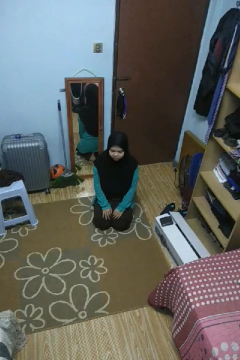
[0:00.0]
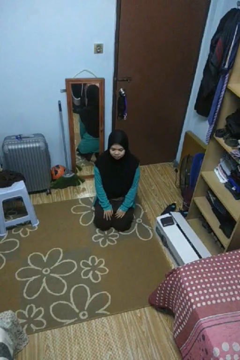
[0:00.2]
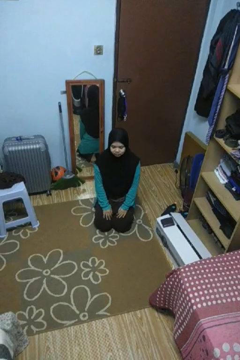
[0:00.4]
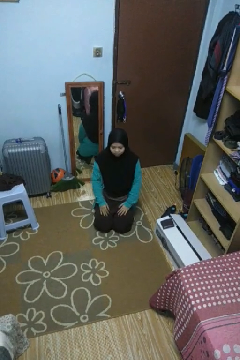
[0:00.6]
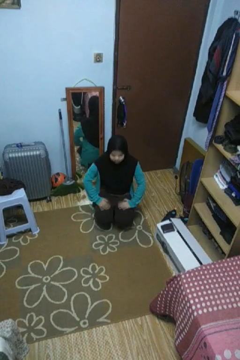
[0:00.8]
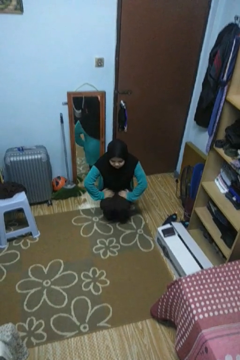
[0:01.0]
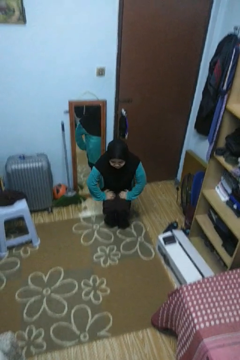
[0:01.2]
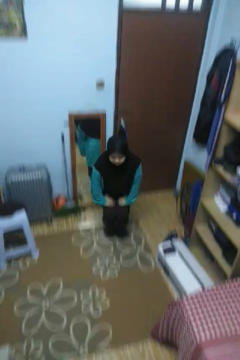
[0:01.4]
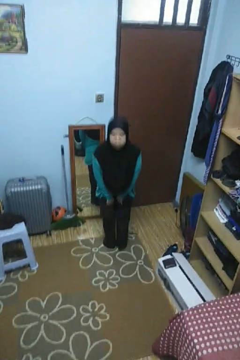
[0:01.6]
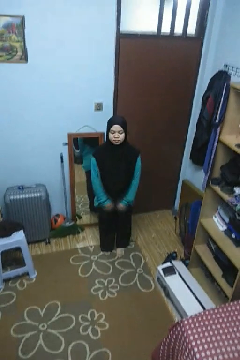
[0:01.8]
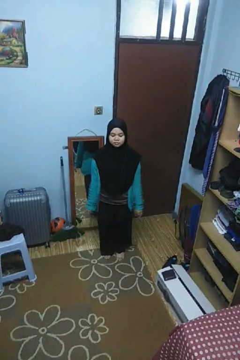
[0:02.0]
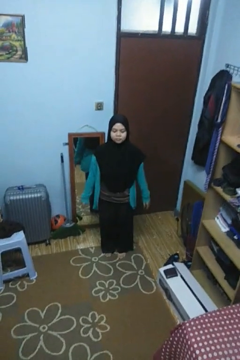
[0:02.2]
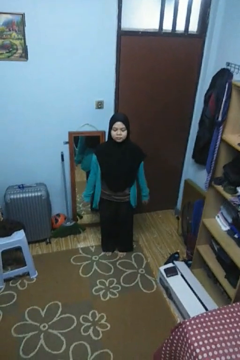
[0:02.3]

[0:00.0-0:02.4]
person stands up from floor

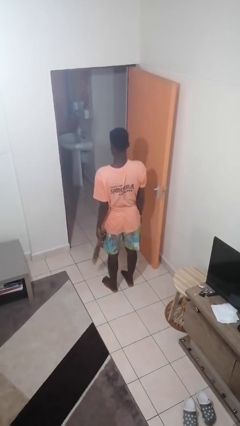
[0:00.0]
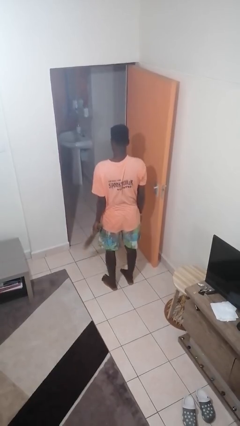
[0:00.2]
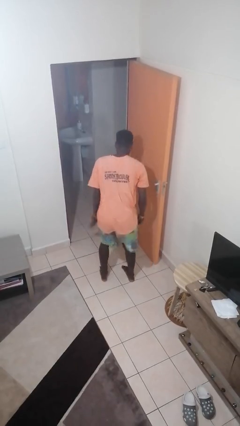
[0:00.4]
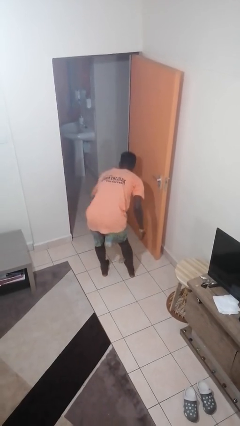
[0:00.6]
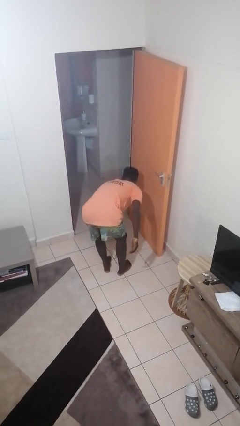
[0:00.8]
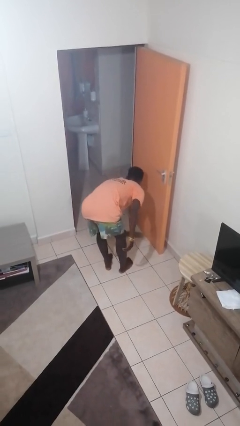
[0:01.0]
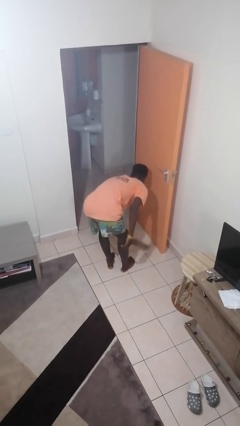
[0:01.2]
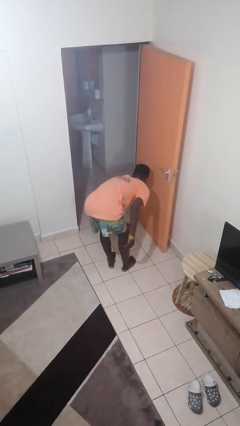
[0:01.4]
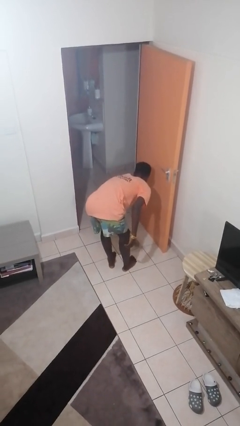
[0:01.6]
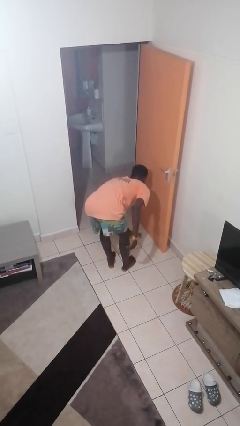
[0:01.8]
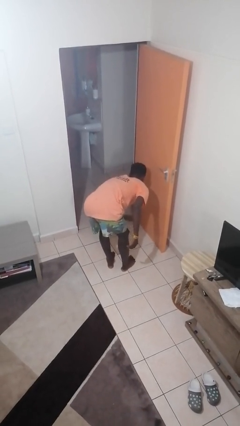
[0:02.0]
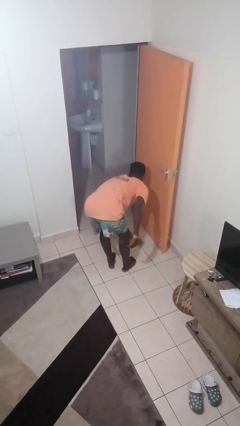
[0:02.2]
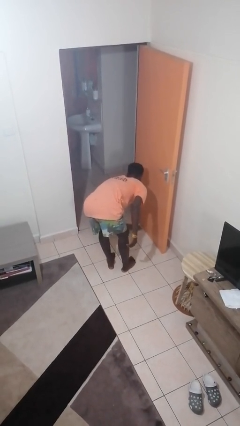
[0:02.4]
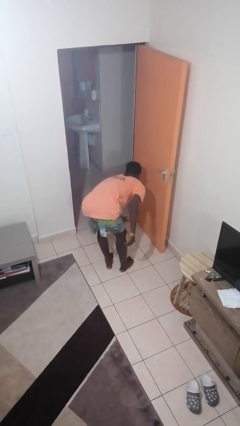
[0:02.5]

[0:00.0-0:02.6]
person sweeps floor

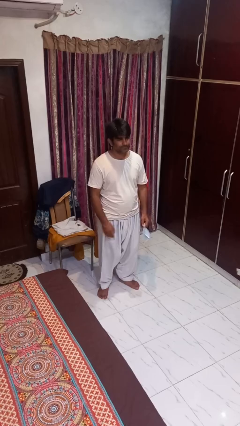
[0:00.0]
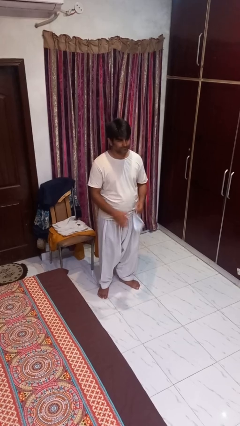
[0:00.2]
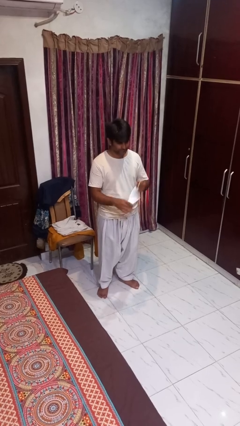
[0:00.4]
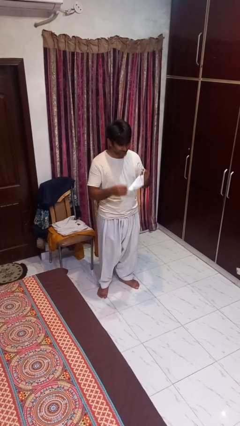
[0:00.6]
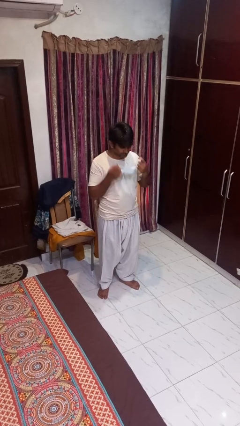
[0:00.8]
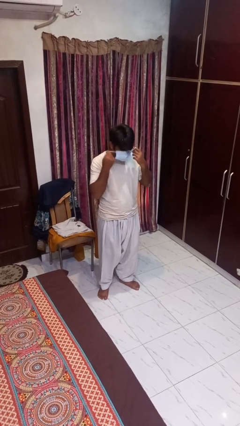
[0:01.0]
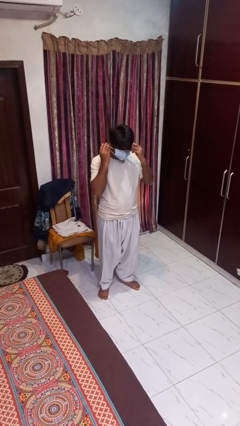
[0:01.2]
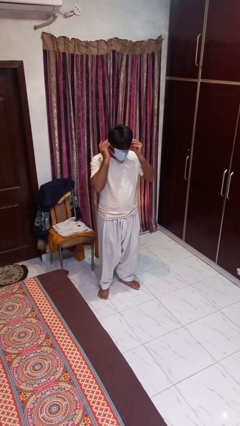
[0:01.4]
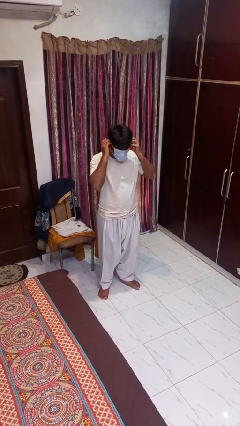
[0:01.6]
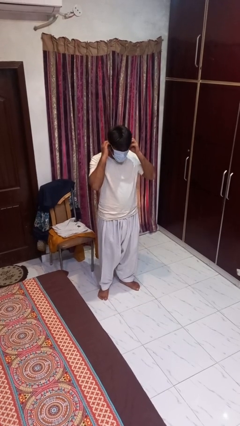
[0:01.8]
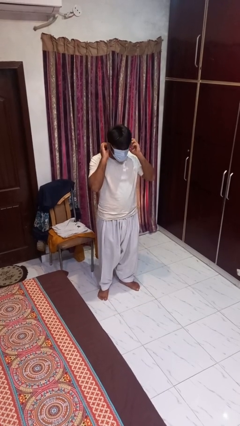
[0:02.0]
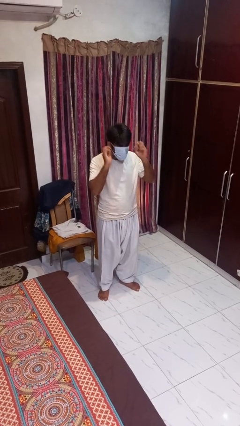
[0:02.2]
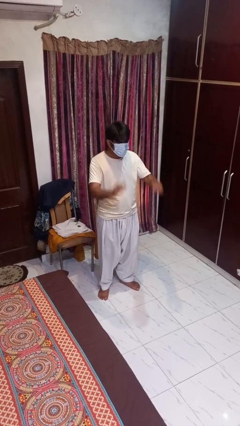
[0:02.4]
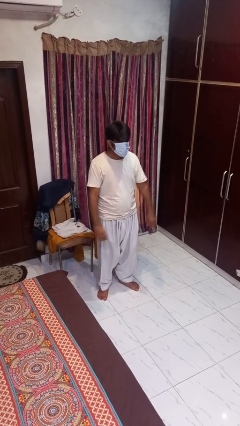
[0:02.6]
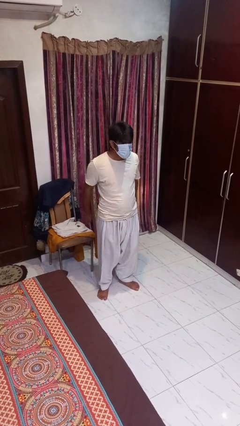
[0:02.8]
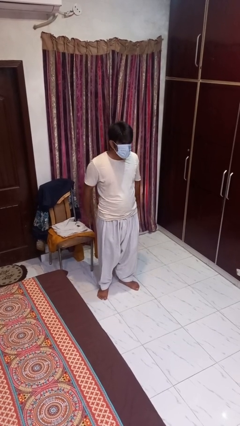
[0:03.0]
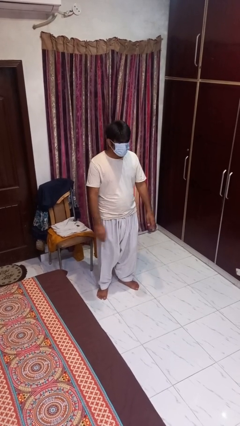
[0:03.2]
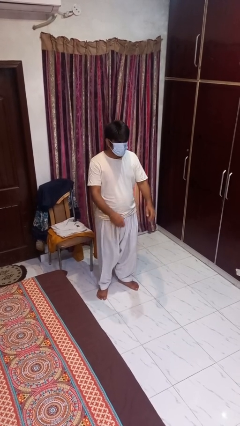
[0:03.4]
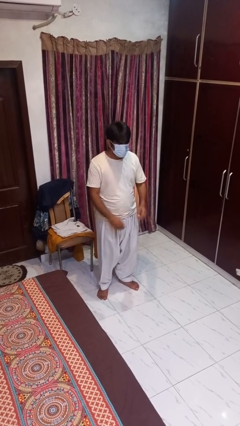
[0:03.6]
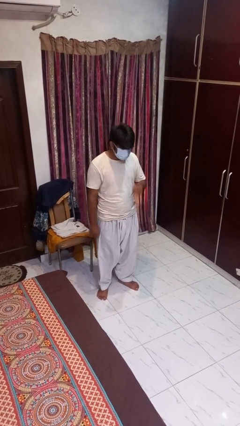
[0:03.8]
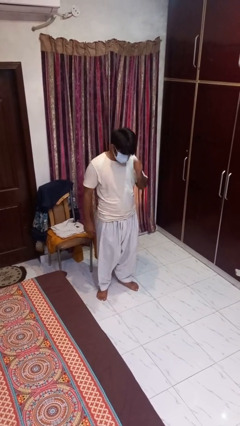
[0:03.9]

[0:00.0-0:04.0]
person puts on facemask

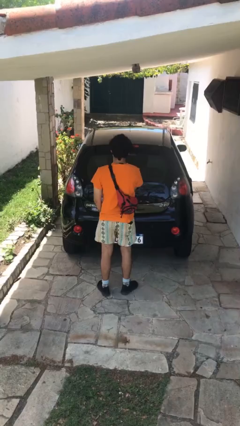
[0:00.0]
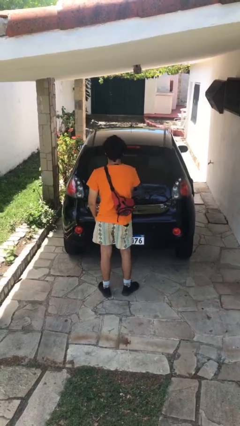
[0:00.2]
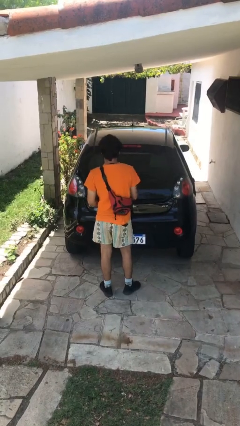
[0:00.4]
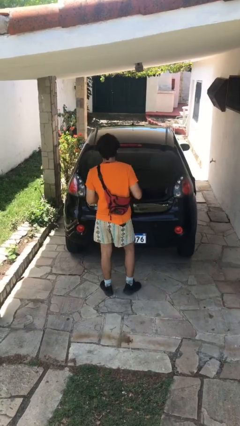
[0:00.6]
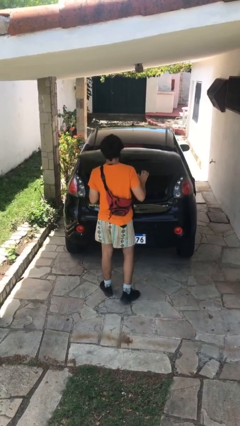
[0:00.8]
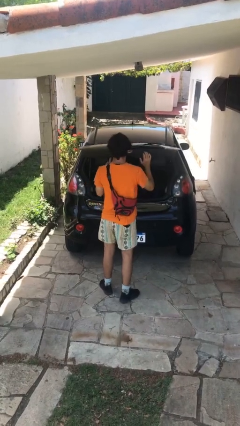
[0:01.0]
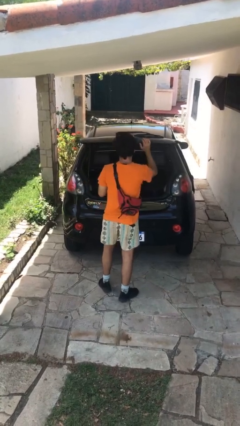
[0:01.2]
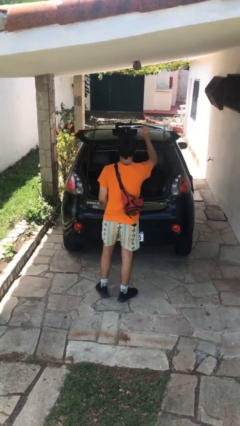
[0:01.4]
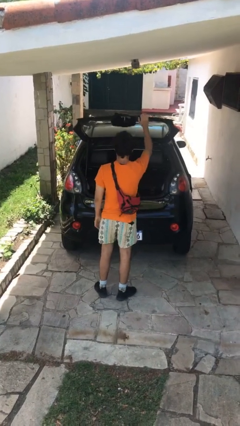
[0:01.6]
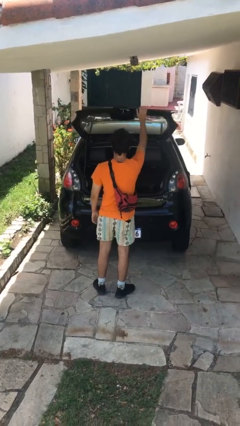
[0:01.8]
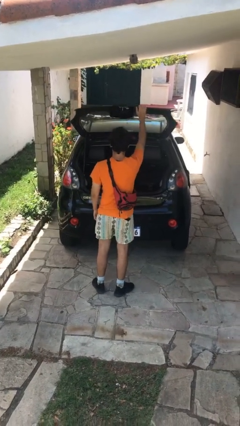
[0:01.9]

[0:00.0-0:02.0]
person opens car trunk

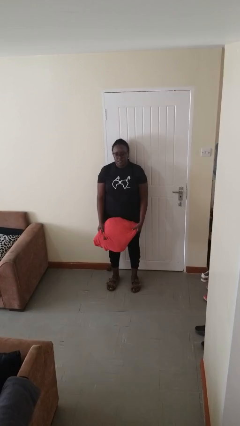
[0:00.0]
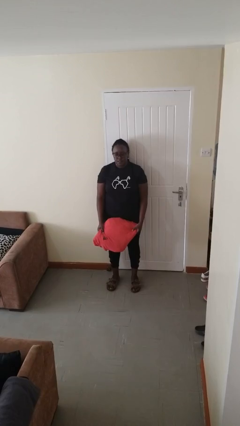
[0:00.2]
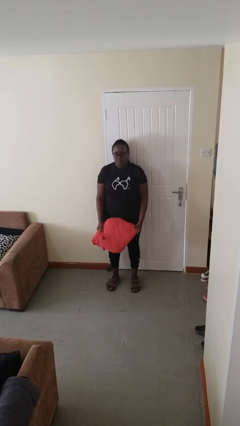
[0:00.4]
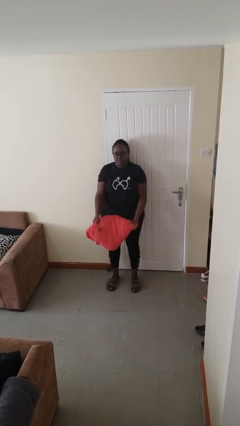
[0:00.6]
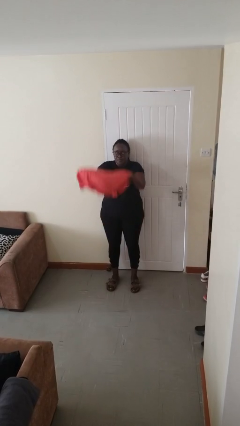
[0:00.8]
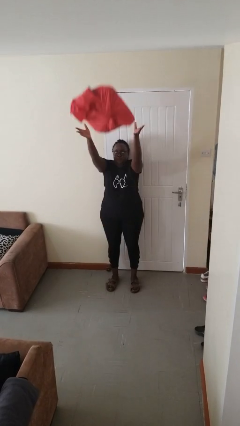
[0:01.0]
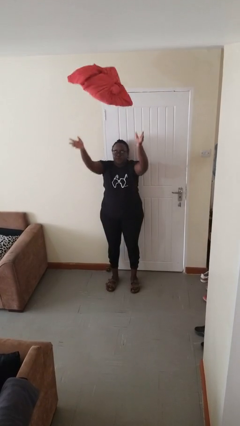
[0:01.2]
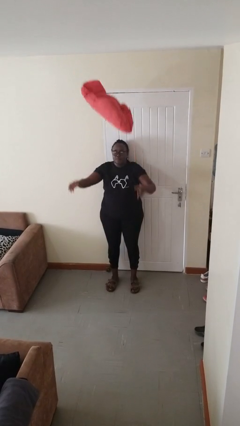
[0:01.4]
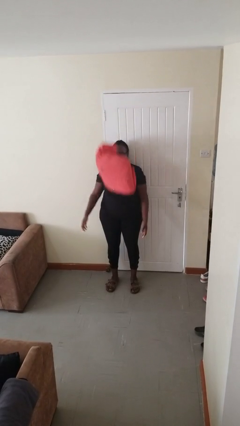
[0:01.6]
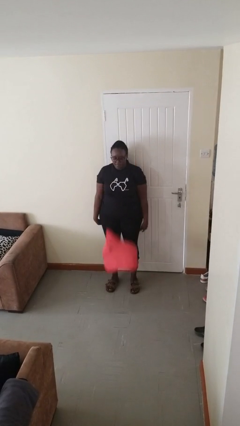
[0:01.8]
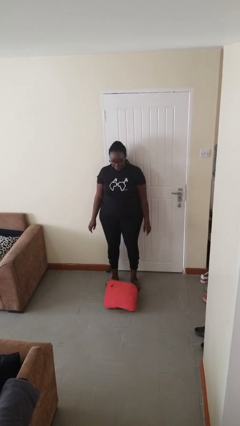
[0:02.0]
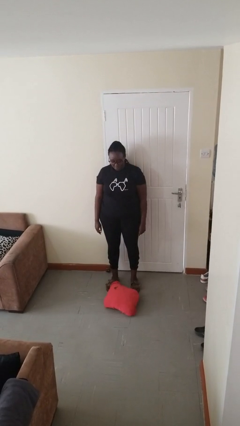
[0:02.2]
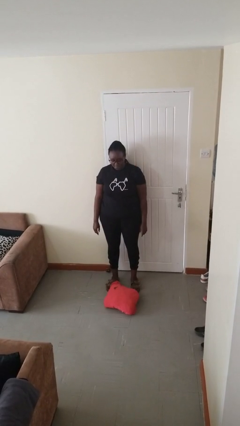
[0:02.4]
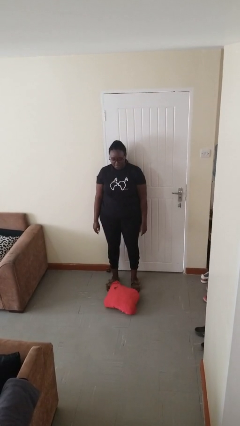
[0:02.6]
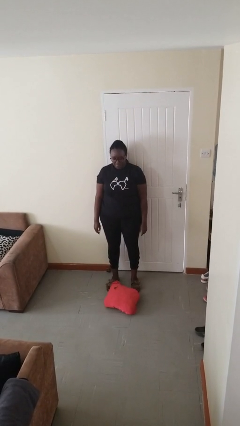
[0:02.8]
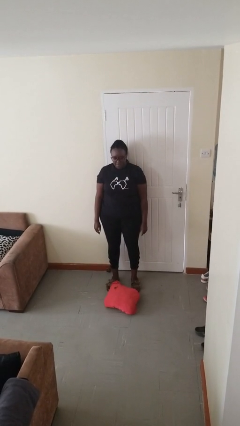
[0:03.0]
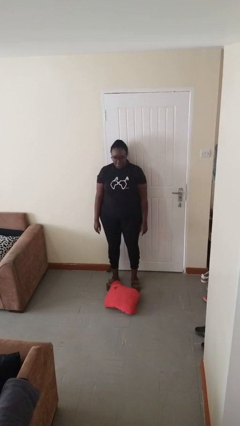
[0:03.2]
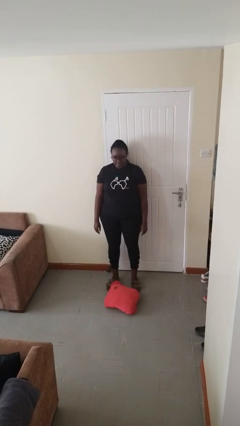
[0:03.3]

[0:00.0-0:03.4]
person throws object into air

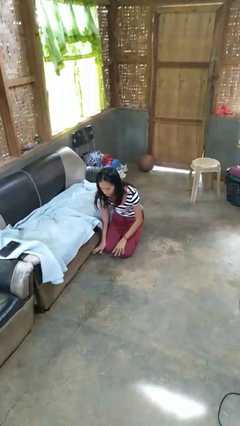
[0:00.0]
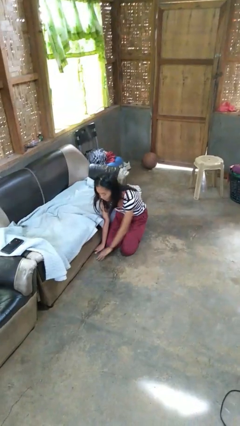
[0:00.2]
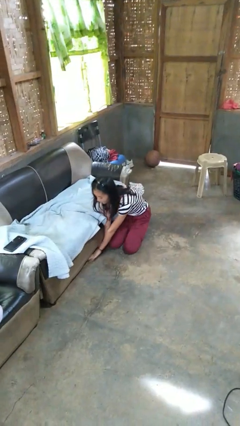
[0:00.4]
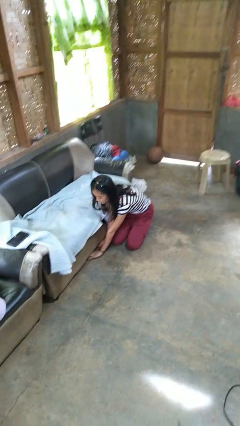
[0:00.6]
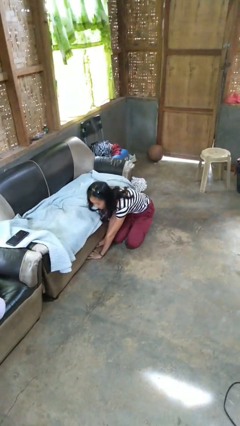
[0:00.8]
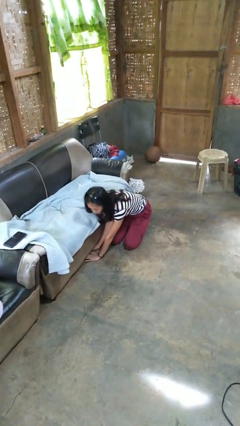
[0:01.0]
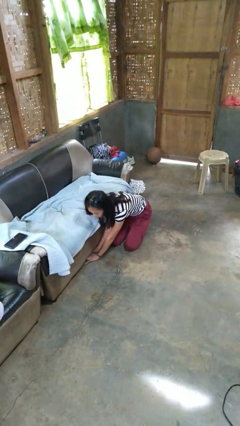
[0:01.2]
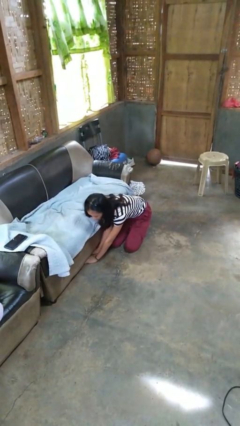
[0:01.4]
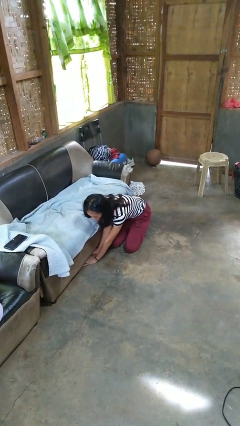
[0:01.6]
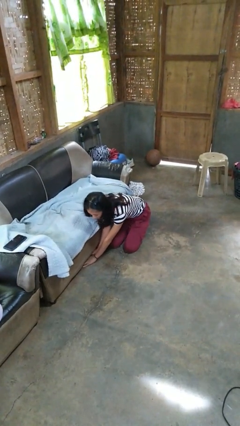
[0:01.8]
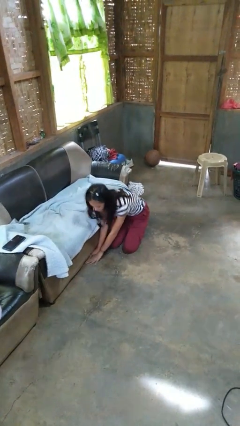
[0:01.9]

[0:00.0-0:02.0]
person searches under couch

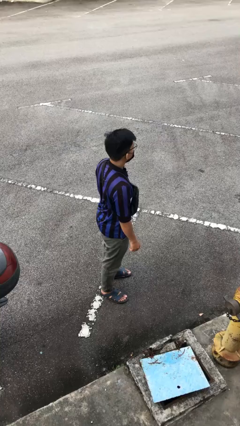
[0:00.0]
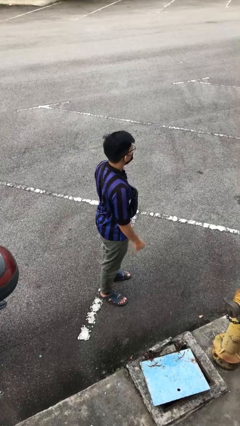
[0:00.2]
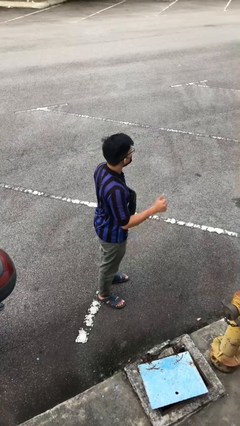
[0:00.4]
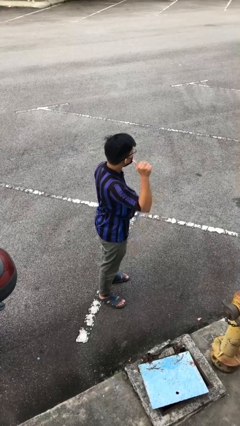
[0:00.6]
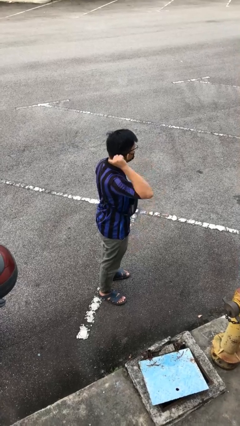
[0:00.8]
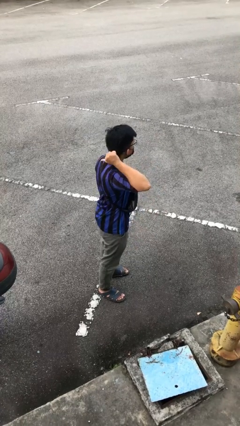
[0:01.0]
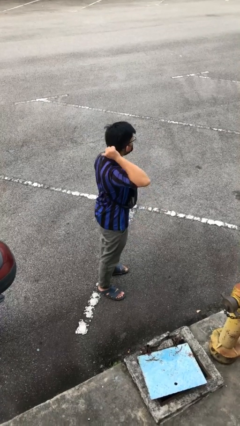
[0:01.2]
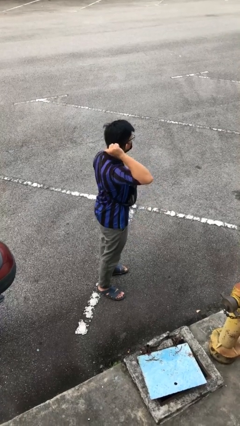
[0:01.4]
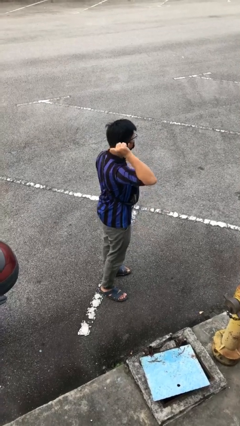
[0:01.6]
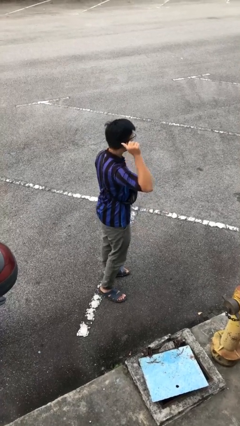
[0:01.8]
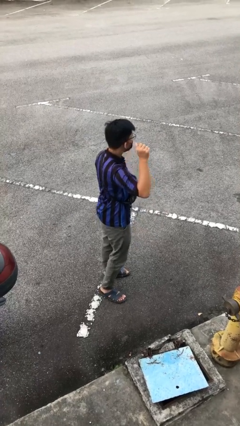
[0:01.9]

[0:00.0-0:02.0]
person gestures behind me
